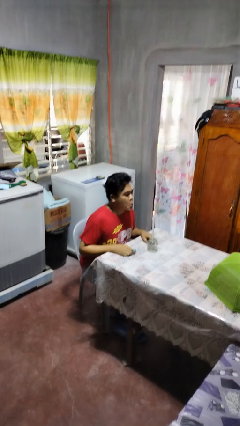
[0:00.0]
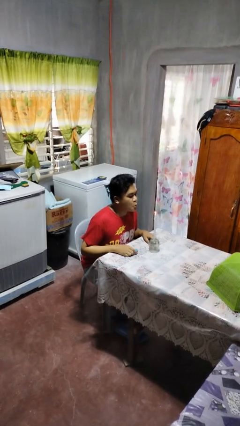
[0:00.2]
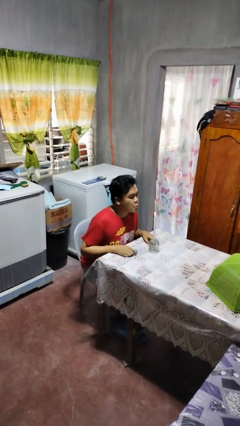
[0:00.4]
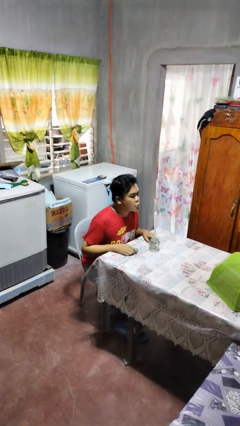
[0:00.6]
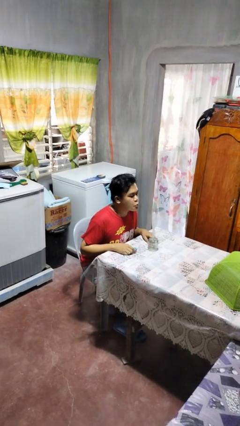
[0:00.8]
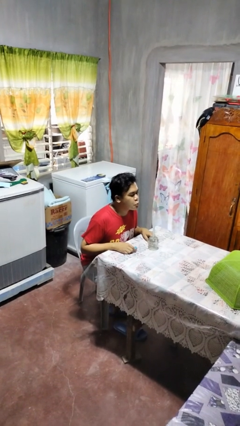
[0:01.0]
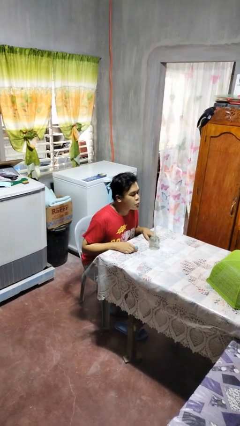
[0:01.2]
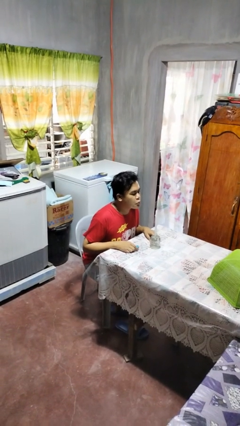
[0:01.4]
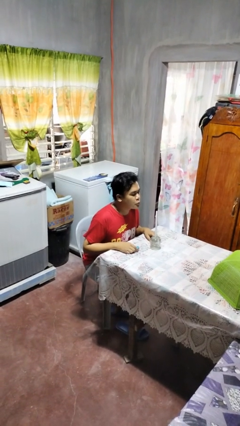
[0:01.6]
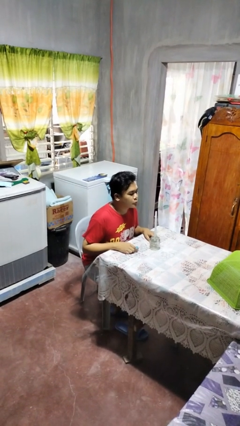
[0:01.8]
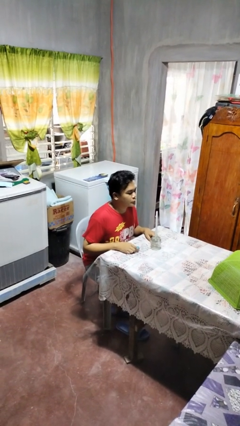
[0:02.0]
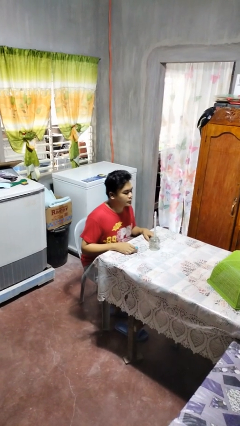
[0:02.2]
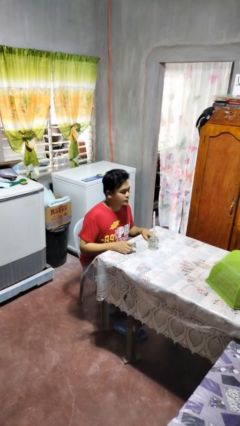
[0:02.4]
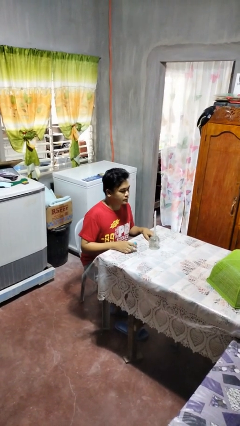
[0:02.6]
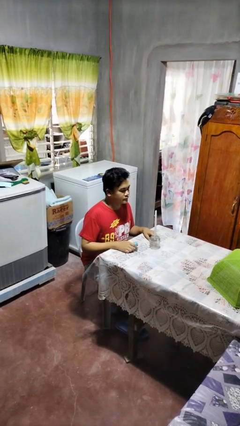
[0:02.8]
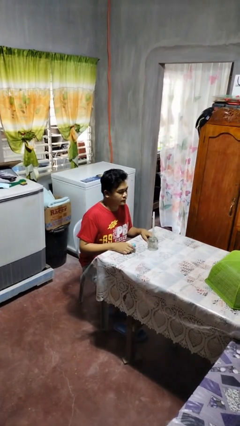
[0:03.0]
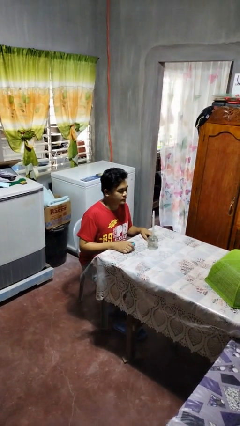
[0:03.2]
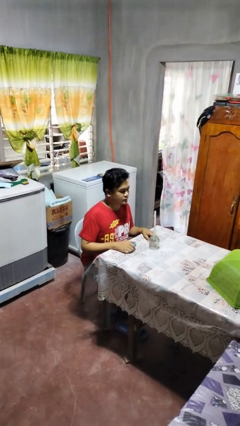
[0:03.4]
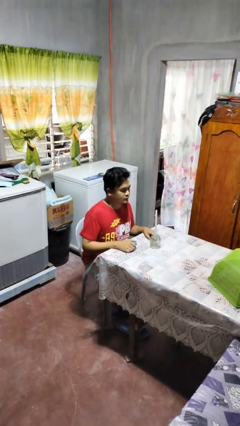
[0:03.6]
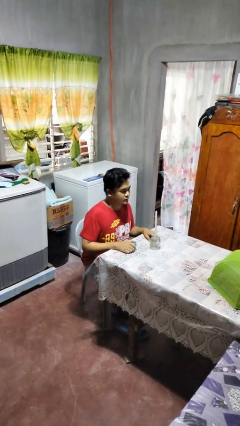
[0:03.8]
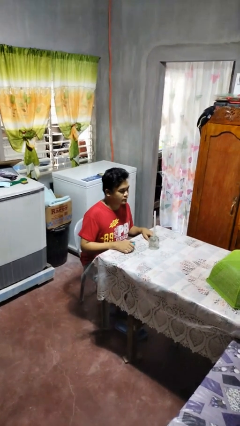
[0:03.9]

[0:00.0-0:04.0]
person extinguishes candle

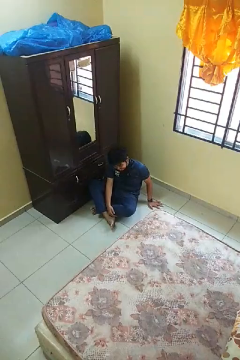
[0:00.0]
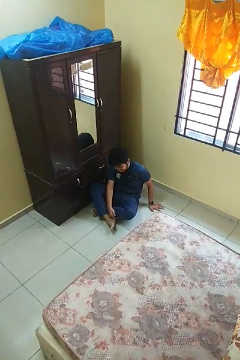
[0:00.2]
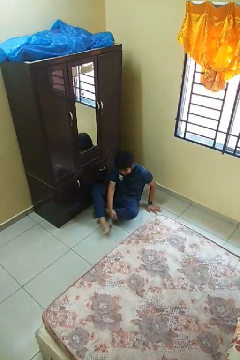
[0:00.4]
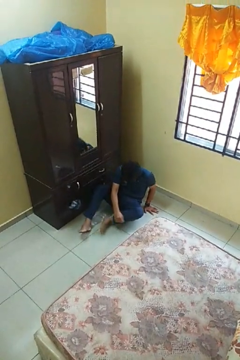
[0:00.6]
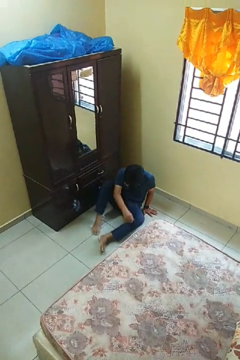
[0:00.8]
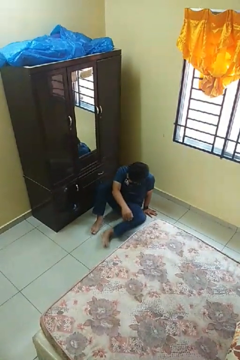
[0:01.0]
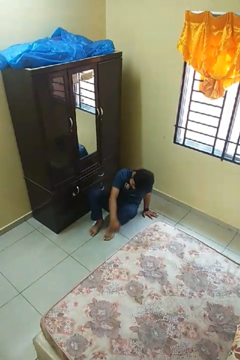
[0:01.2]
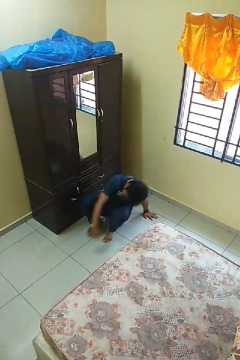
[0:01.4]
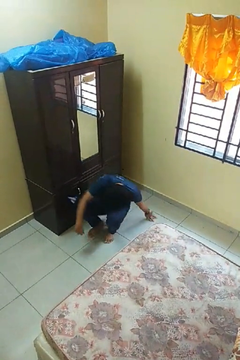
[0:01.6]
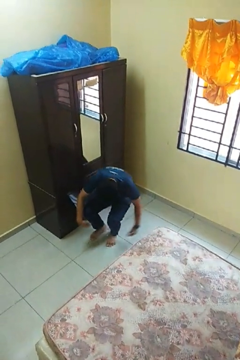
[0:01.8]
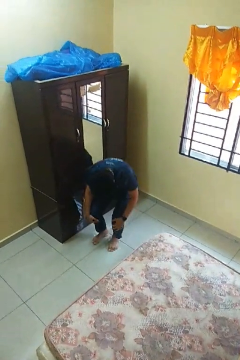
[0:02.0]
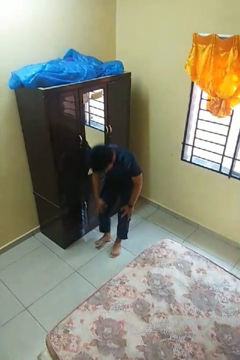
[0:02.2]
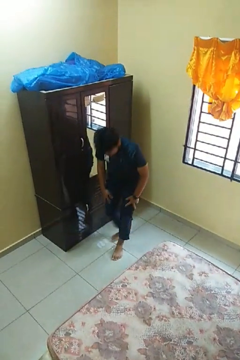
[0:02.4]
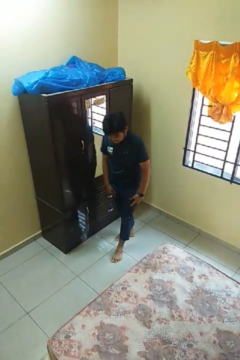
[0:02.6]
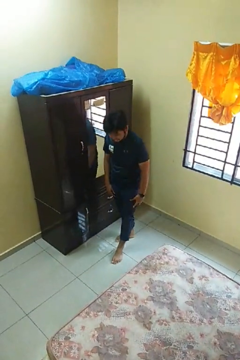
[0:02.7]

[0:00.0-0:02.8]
person stands up from floor

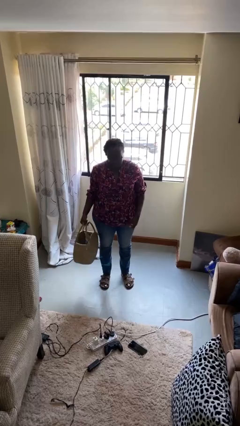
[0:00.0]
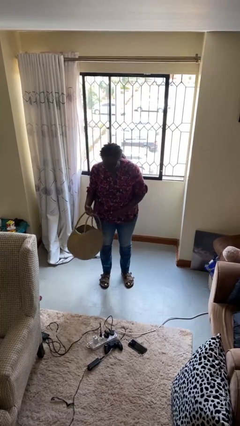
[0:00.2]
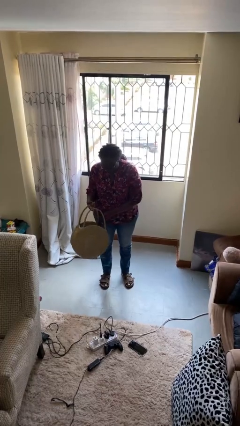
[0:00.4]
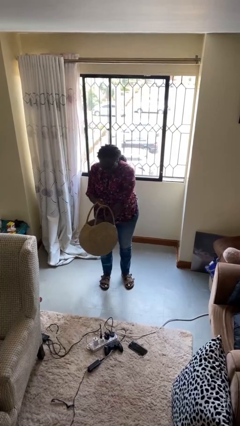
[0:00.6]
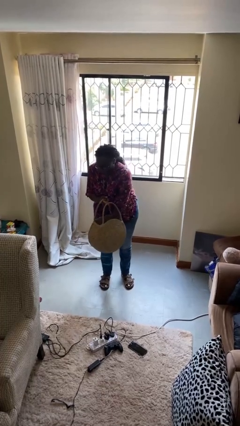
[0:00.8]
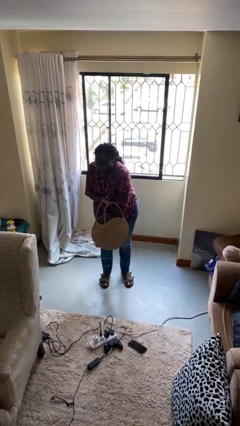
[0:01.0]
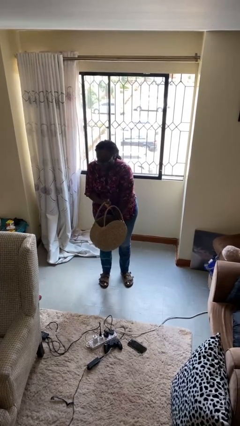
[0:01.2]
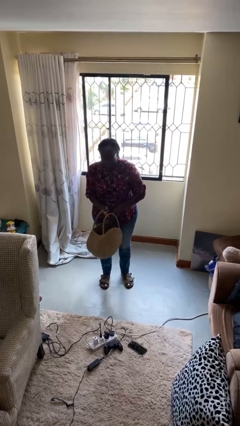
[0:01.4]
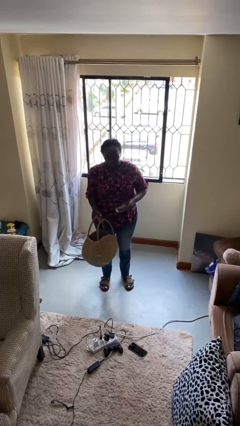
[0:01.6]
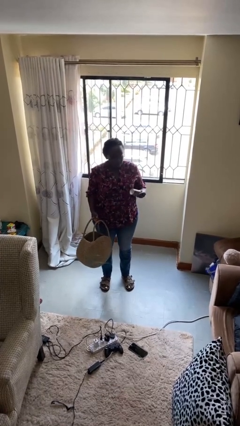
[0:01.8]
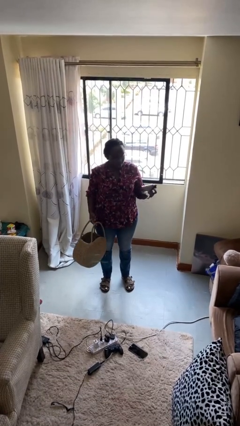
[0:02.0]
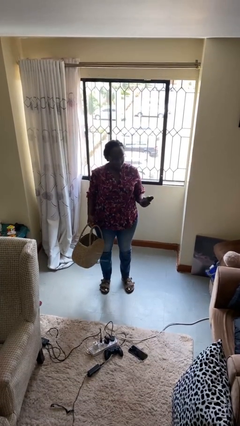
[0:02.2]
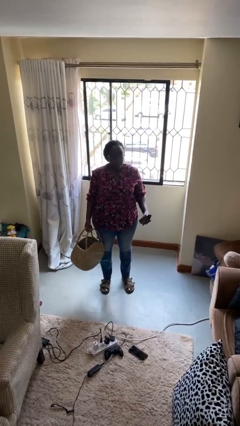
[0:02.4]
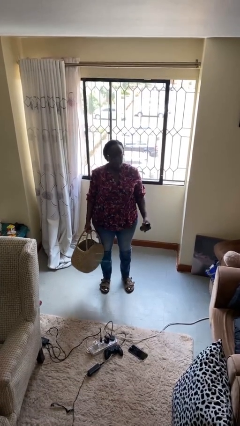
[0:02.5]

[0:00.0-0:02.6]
person takes object from basket

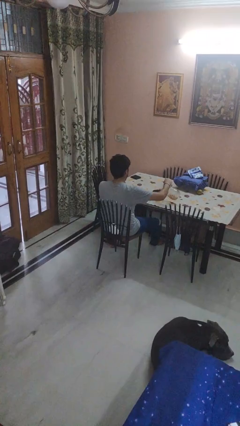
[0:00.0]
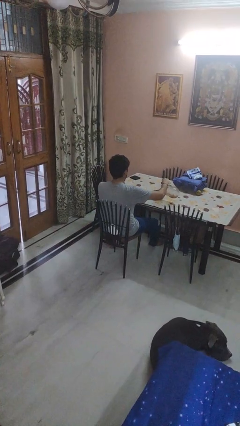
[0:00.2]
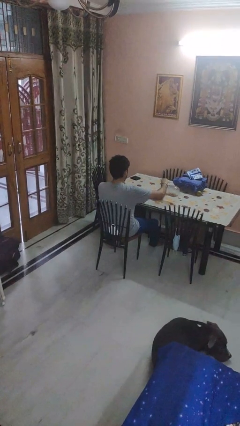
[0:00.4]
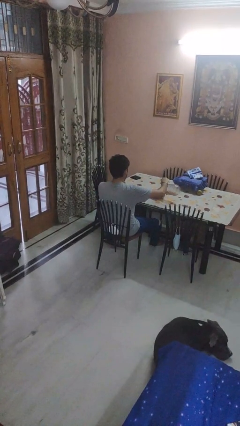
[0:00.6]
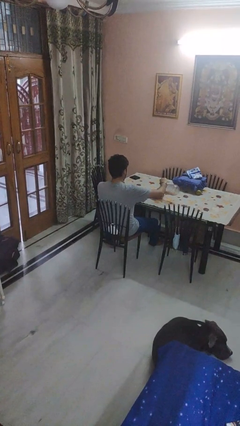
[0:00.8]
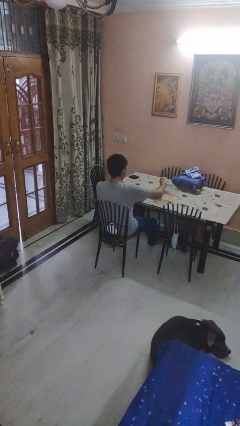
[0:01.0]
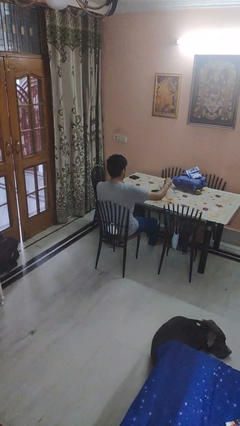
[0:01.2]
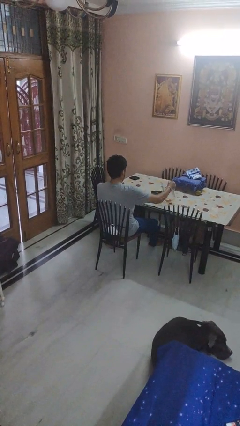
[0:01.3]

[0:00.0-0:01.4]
person pours into bowl

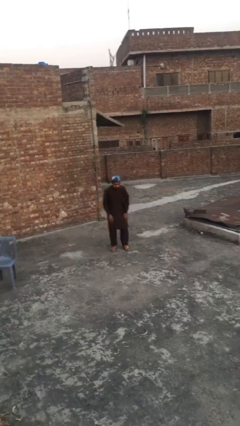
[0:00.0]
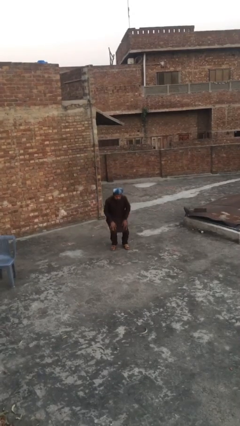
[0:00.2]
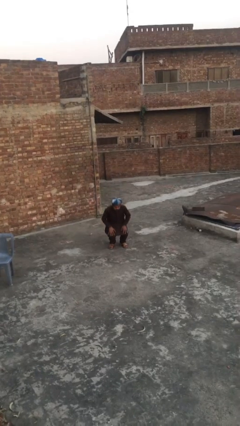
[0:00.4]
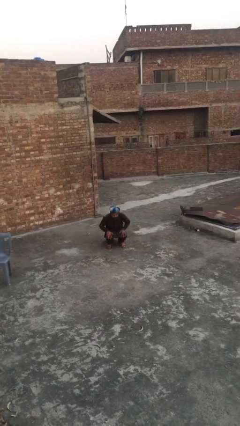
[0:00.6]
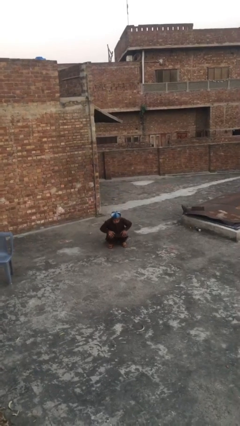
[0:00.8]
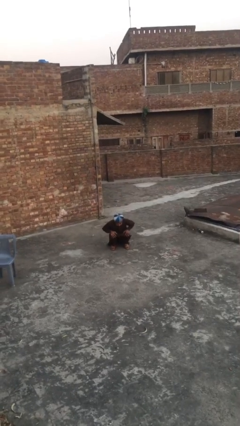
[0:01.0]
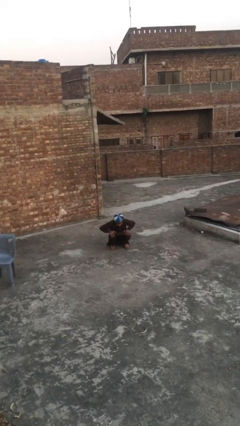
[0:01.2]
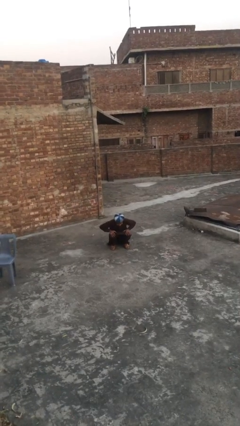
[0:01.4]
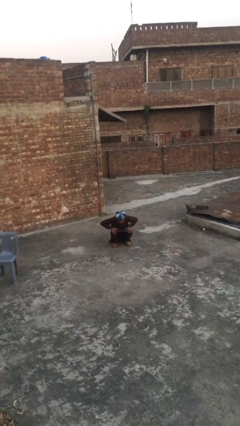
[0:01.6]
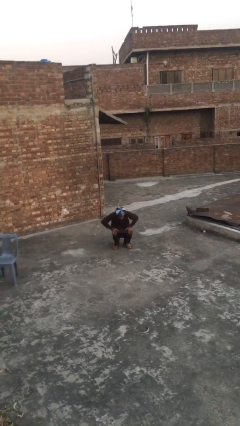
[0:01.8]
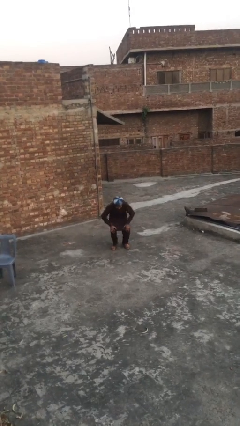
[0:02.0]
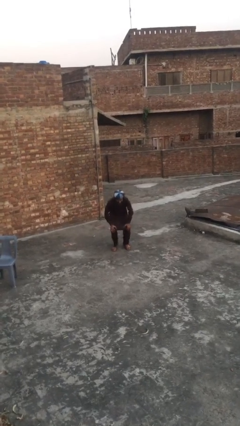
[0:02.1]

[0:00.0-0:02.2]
person sits down

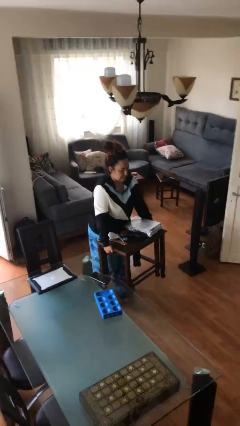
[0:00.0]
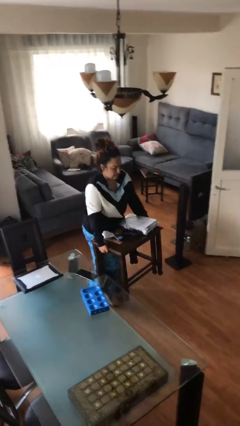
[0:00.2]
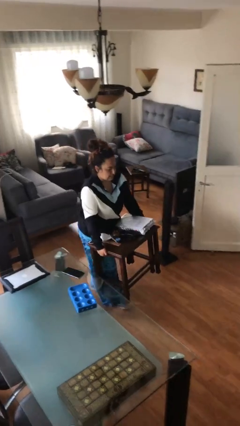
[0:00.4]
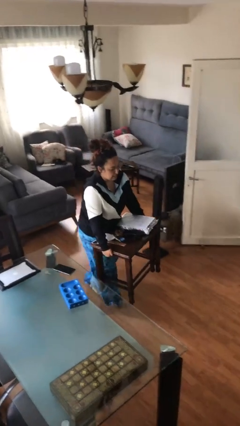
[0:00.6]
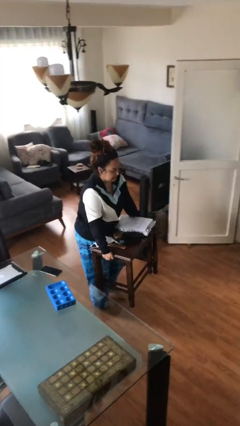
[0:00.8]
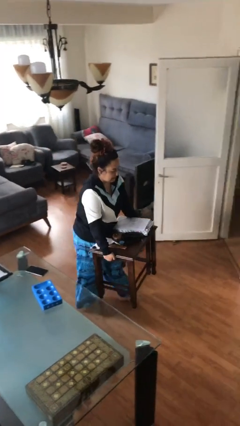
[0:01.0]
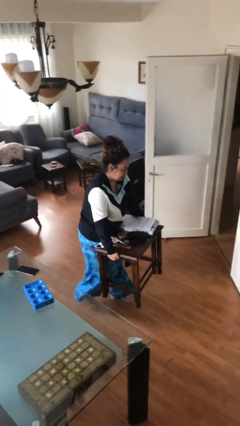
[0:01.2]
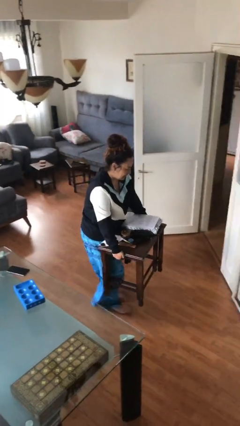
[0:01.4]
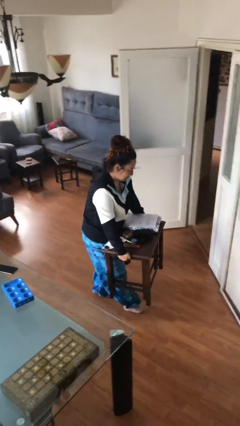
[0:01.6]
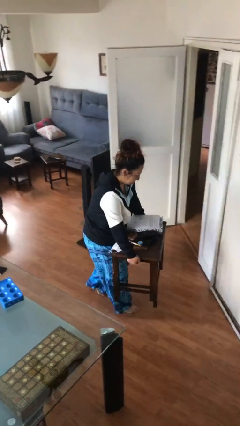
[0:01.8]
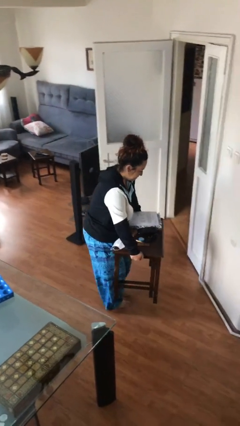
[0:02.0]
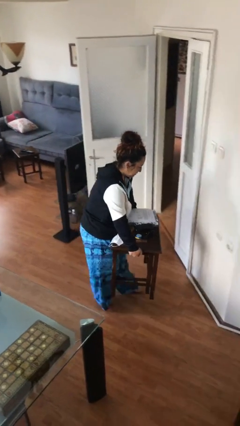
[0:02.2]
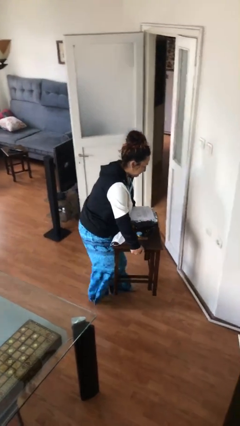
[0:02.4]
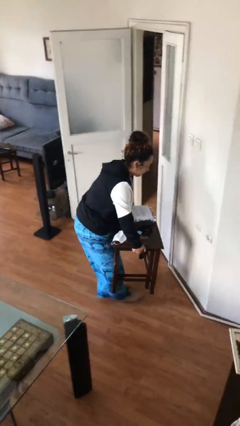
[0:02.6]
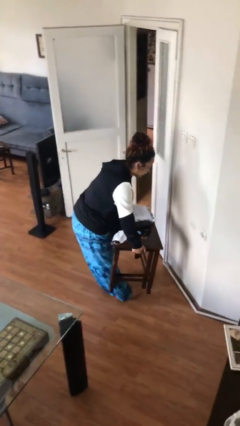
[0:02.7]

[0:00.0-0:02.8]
person carries heavy object

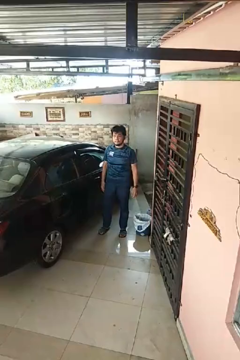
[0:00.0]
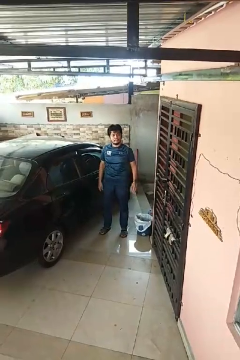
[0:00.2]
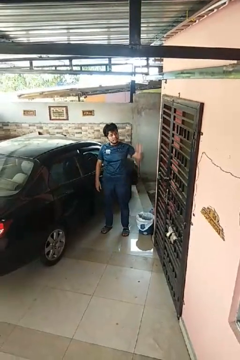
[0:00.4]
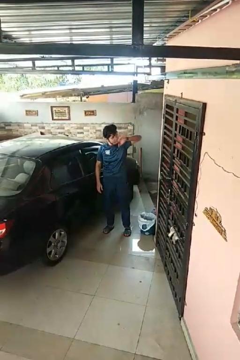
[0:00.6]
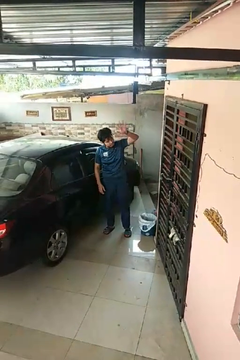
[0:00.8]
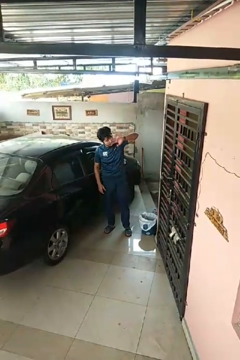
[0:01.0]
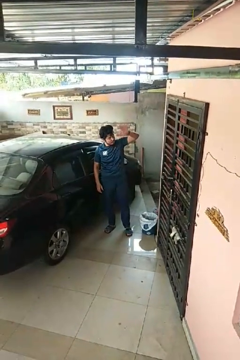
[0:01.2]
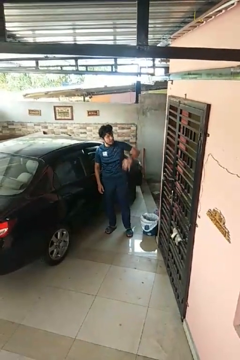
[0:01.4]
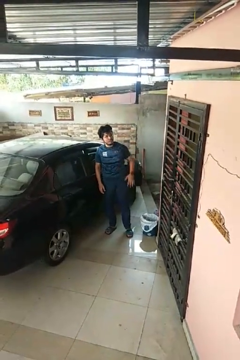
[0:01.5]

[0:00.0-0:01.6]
person waves at person

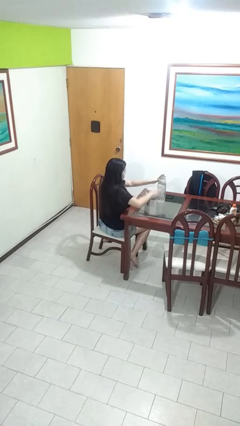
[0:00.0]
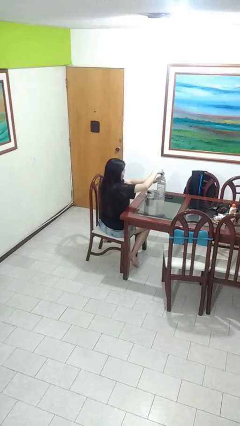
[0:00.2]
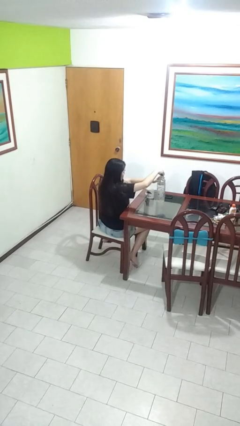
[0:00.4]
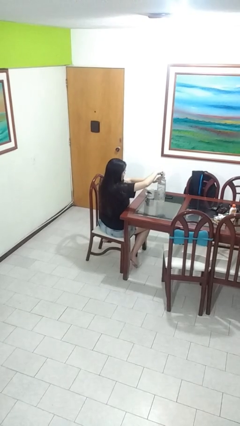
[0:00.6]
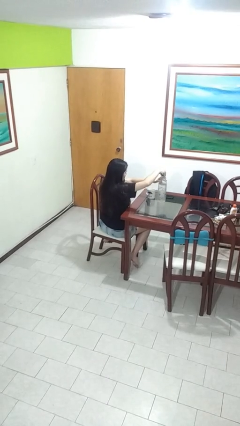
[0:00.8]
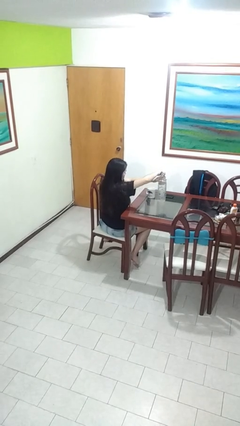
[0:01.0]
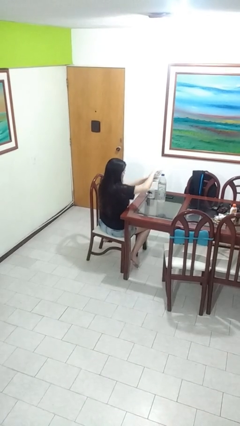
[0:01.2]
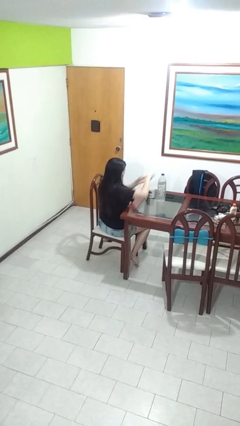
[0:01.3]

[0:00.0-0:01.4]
person screws lid to bottle
